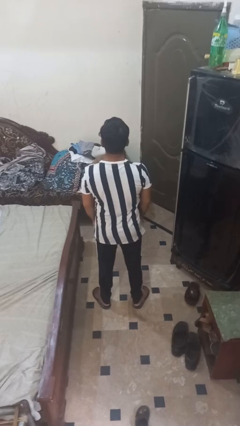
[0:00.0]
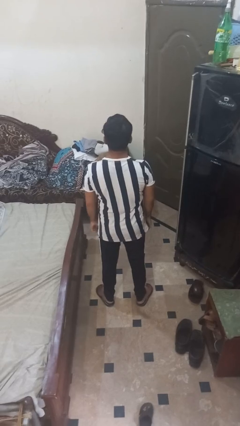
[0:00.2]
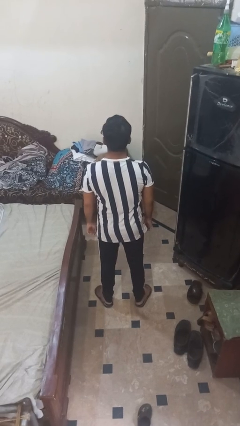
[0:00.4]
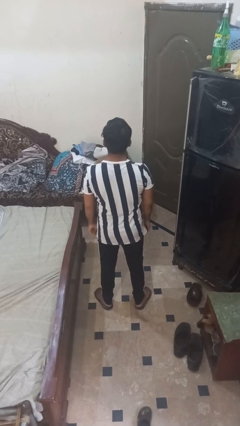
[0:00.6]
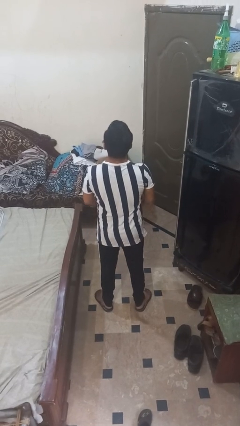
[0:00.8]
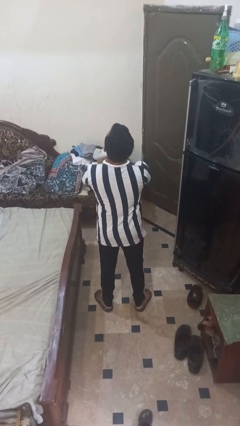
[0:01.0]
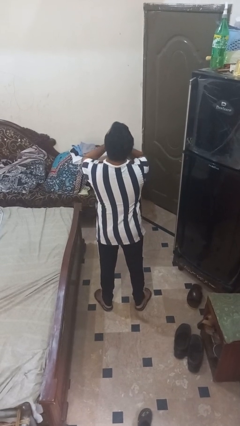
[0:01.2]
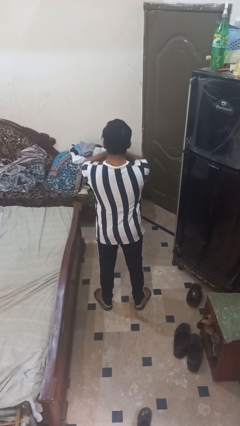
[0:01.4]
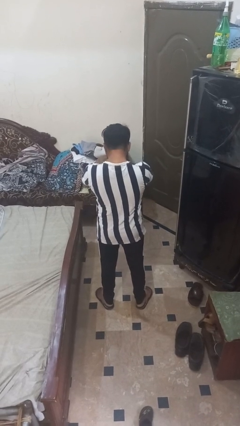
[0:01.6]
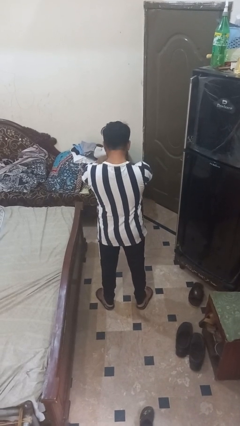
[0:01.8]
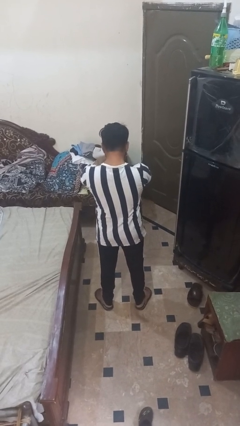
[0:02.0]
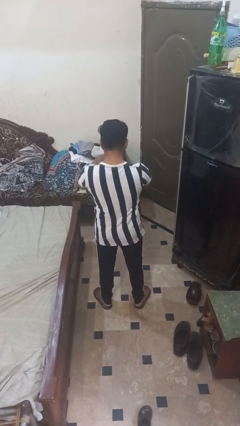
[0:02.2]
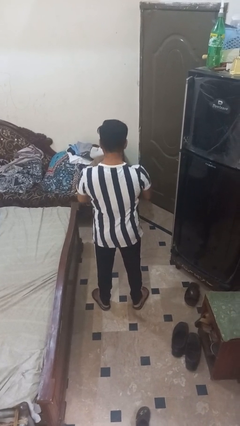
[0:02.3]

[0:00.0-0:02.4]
person sneezes into hand

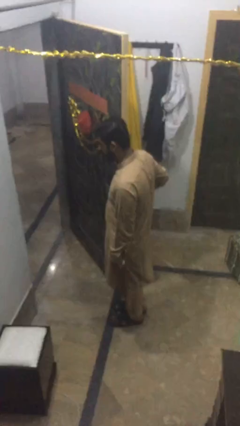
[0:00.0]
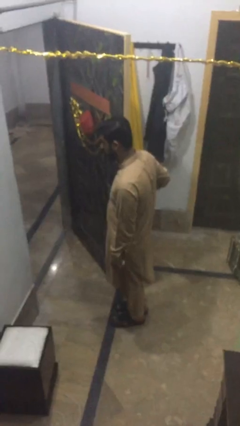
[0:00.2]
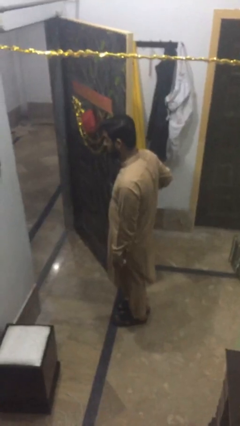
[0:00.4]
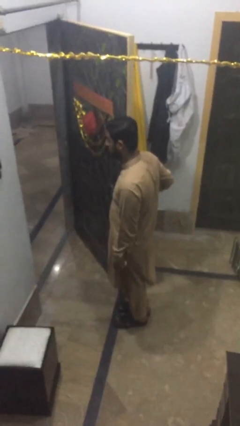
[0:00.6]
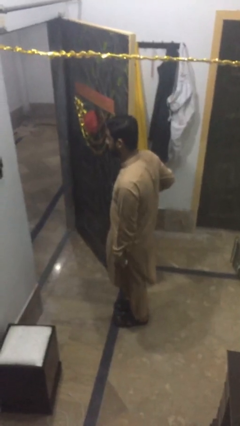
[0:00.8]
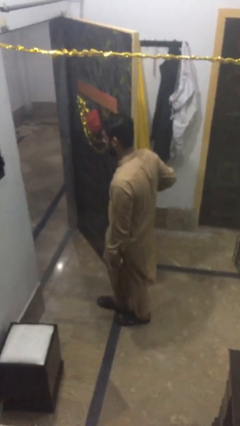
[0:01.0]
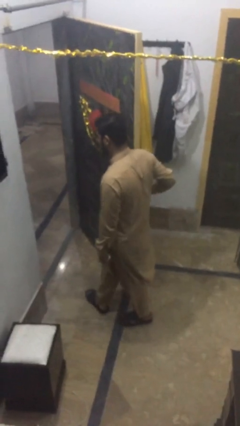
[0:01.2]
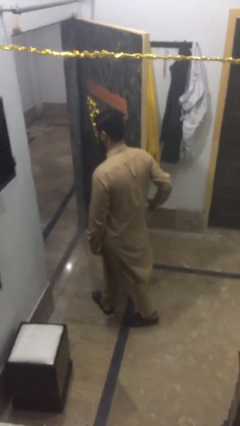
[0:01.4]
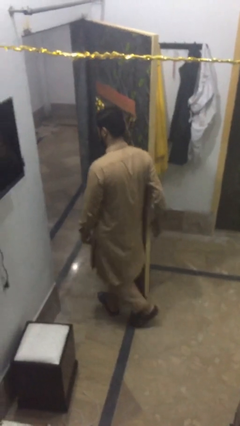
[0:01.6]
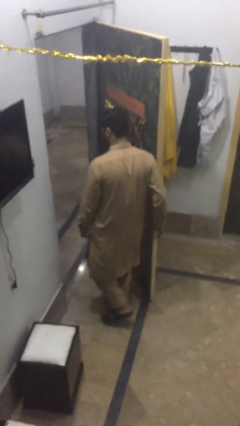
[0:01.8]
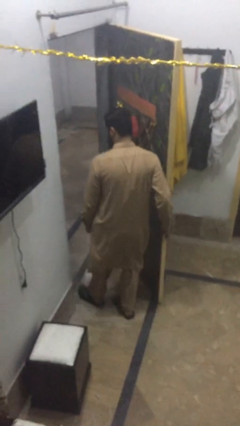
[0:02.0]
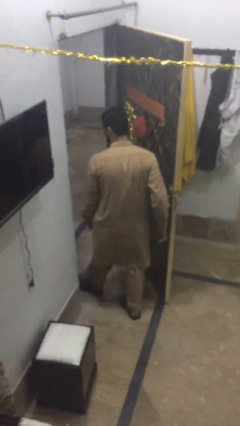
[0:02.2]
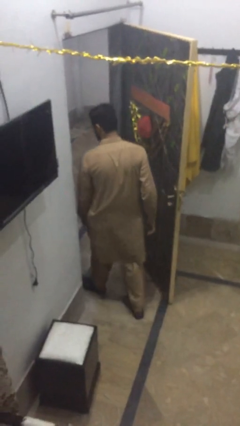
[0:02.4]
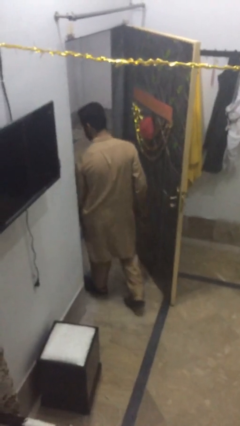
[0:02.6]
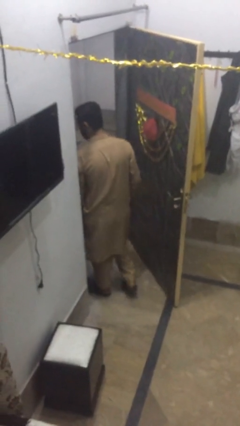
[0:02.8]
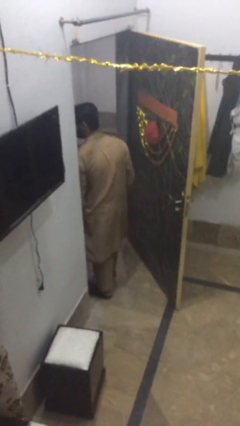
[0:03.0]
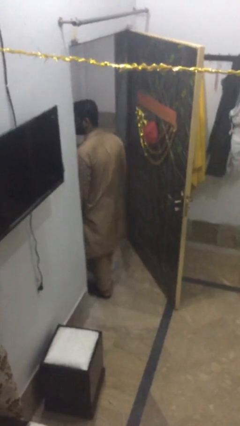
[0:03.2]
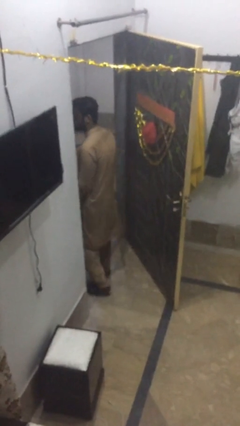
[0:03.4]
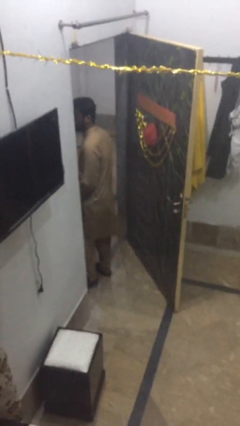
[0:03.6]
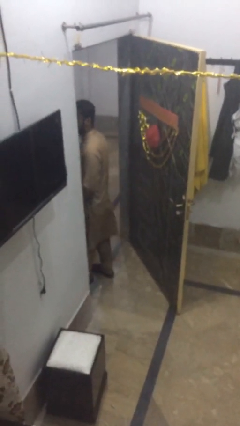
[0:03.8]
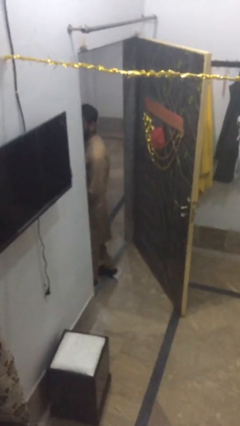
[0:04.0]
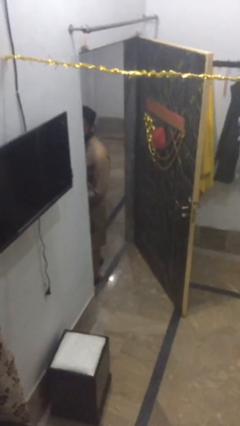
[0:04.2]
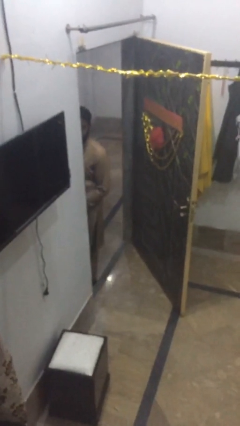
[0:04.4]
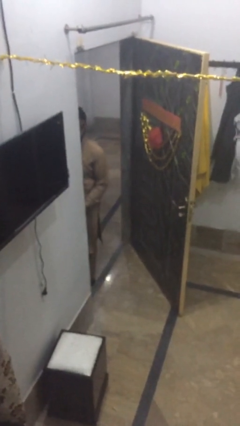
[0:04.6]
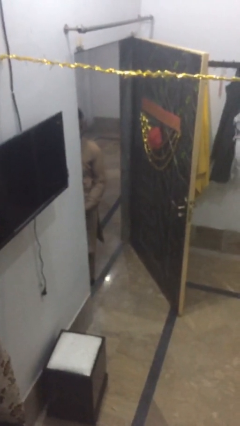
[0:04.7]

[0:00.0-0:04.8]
person exits scene through structure

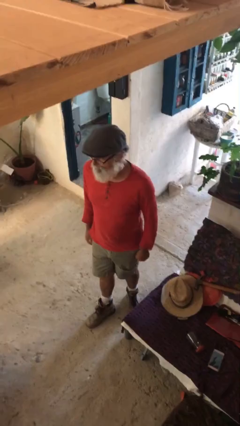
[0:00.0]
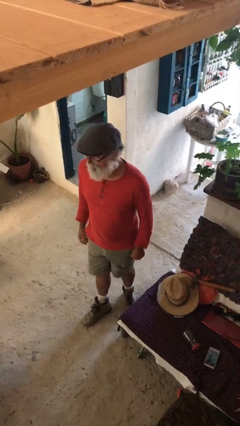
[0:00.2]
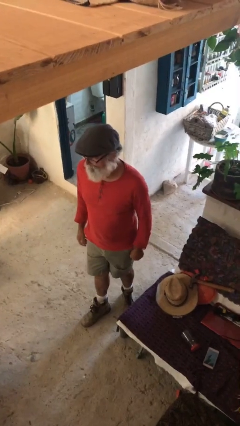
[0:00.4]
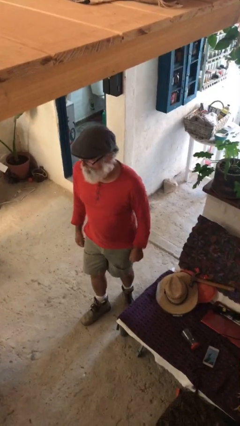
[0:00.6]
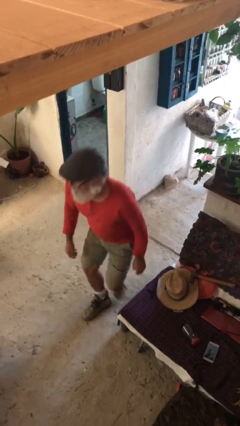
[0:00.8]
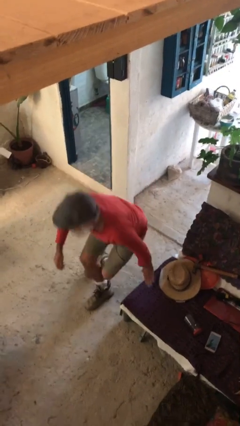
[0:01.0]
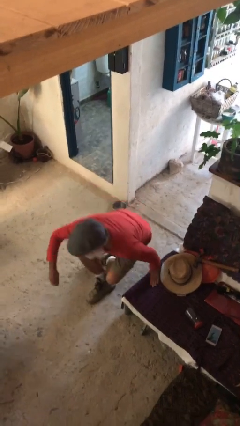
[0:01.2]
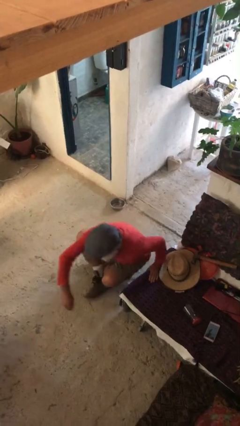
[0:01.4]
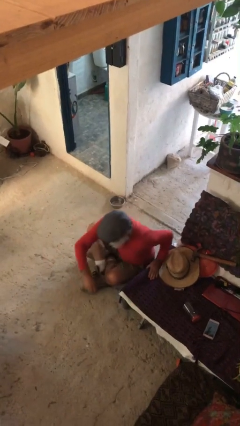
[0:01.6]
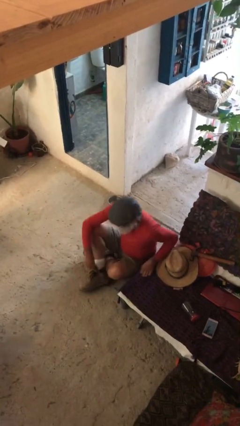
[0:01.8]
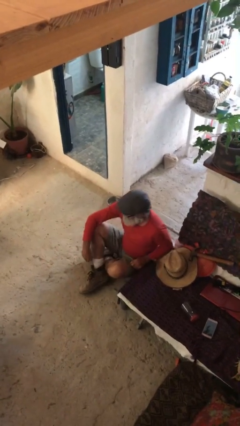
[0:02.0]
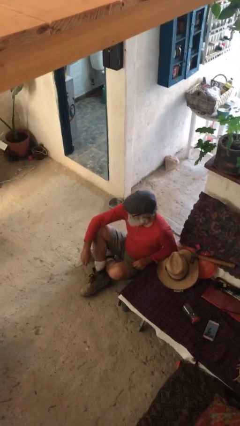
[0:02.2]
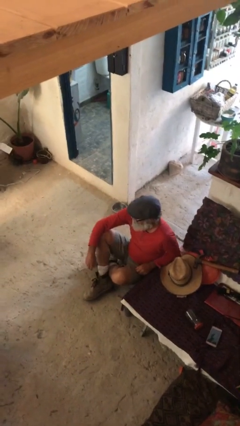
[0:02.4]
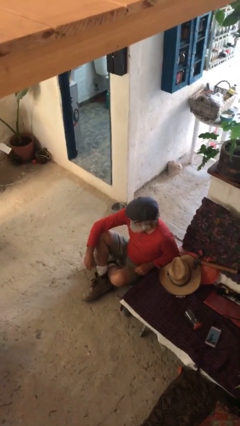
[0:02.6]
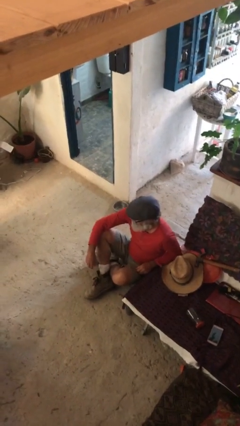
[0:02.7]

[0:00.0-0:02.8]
person sits down

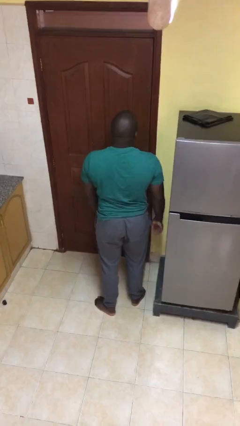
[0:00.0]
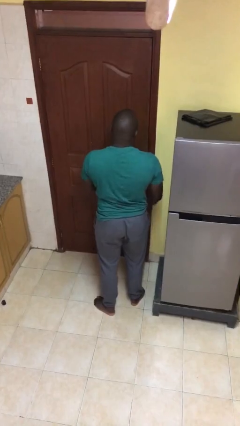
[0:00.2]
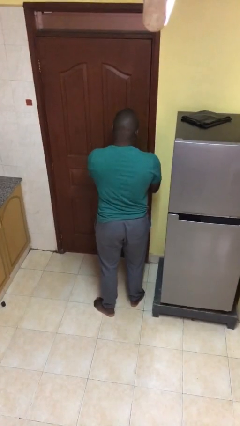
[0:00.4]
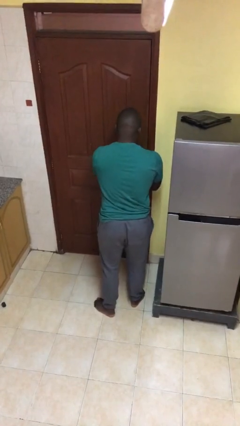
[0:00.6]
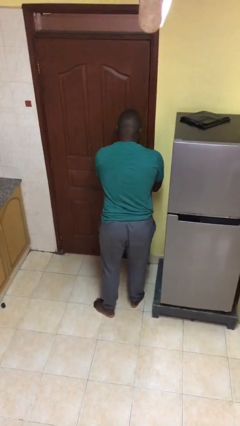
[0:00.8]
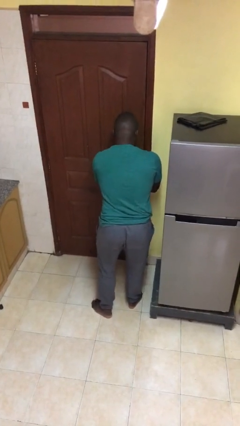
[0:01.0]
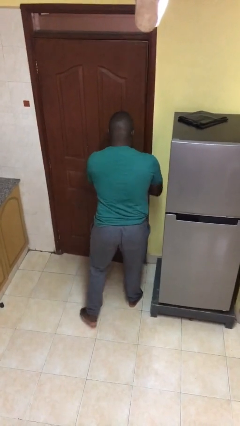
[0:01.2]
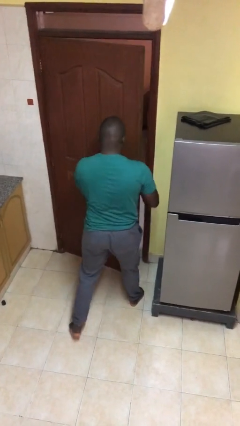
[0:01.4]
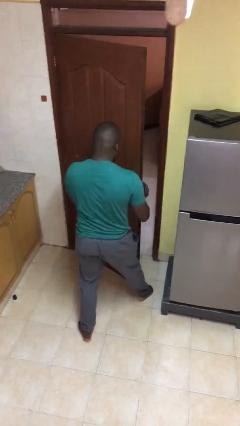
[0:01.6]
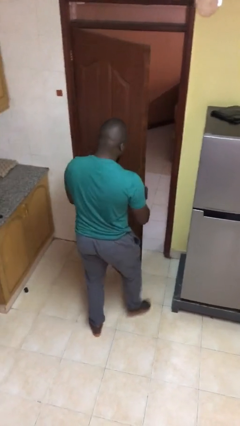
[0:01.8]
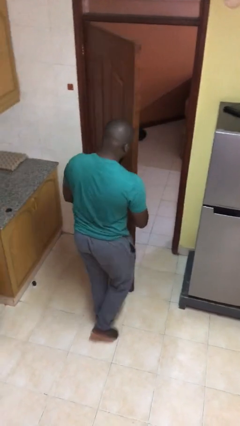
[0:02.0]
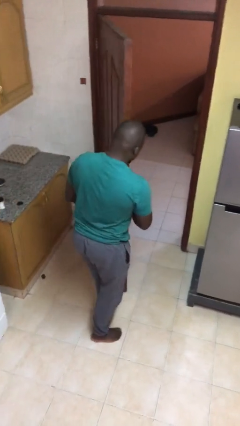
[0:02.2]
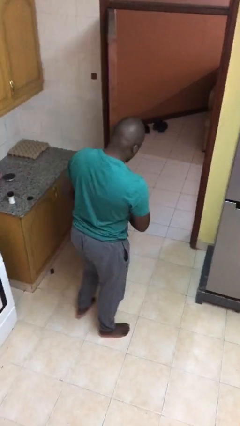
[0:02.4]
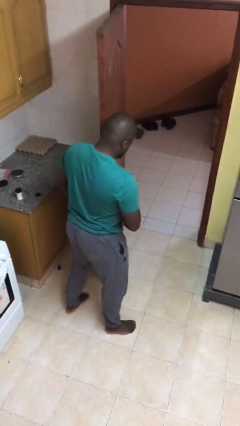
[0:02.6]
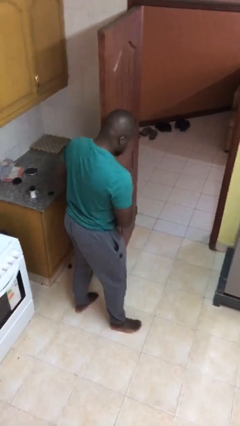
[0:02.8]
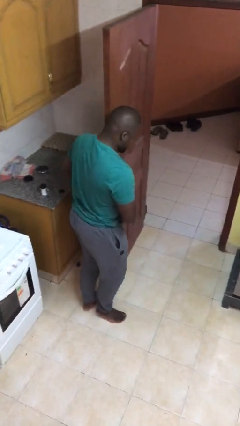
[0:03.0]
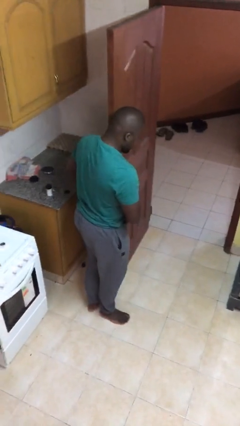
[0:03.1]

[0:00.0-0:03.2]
person opens facility door

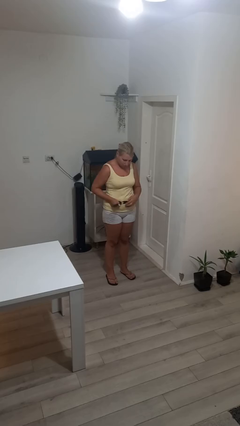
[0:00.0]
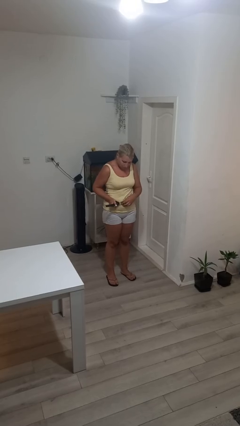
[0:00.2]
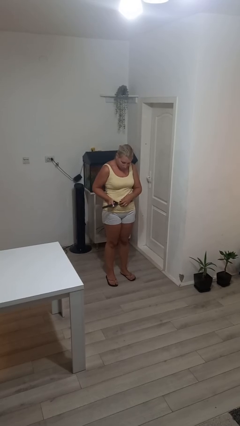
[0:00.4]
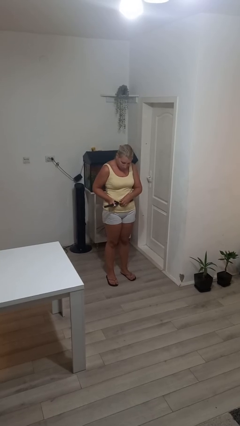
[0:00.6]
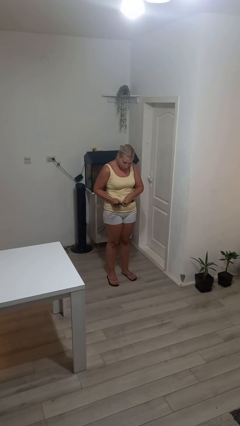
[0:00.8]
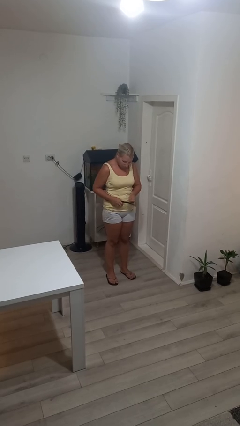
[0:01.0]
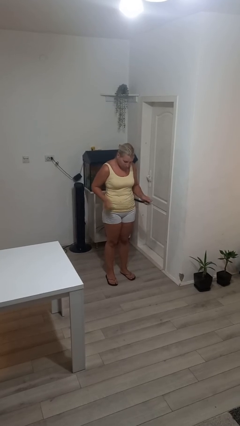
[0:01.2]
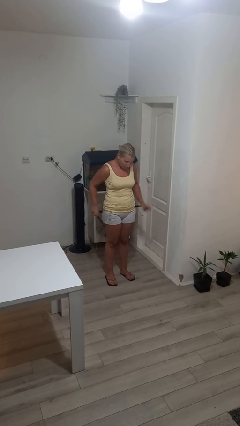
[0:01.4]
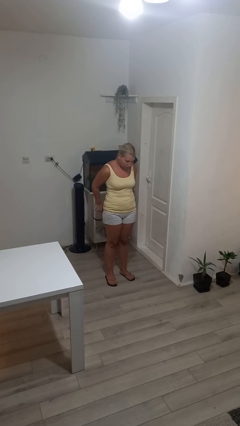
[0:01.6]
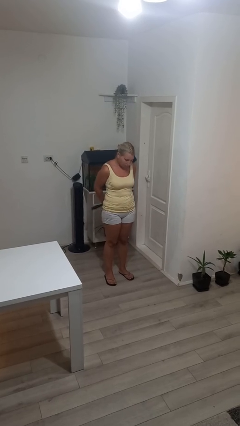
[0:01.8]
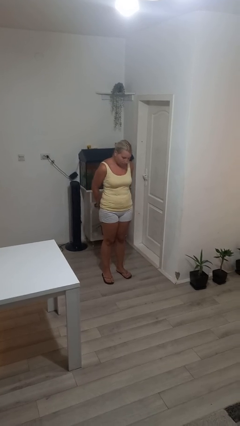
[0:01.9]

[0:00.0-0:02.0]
person takes off belt

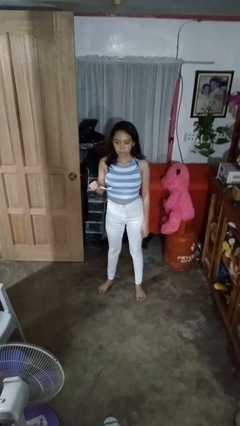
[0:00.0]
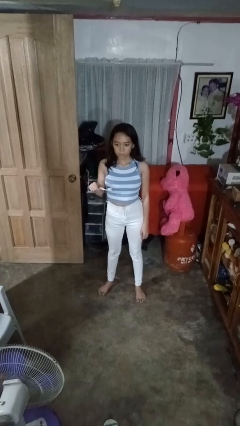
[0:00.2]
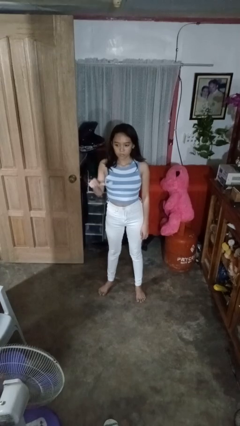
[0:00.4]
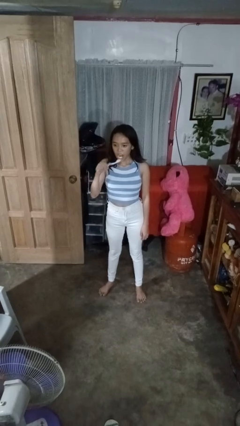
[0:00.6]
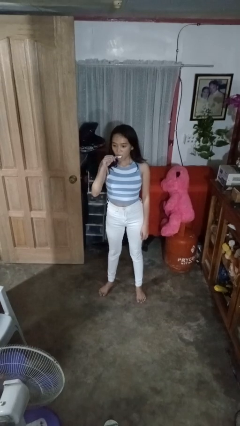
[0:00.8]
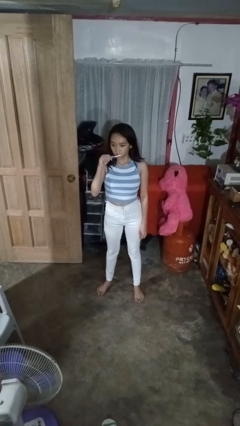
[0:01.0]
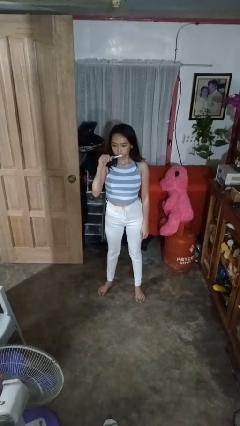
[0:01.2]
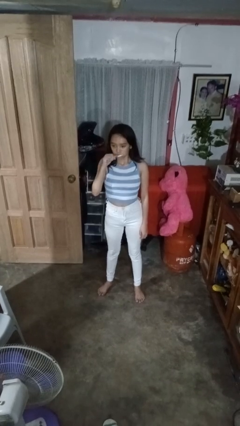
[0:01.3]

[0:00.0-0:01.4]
person brushes teeth

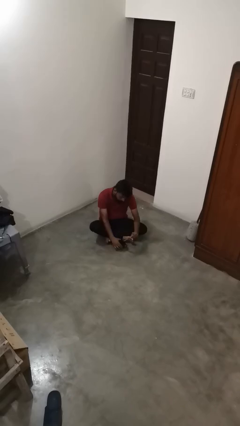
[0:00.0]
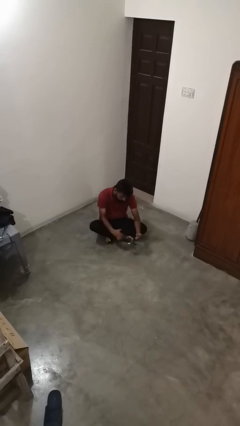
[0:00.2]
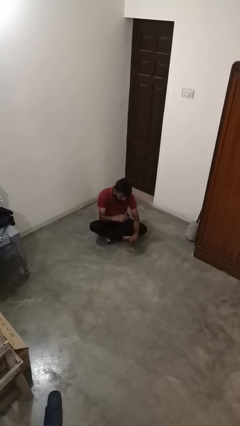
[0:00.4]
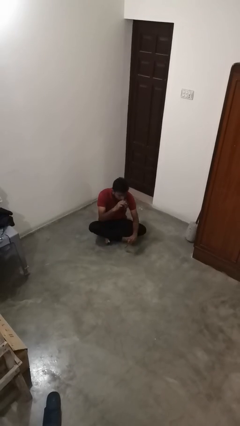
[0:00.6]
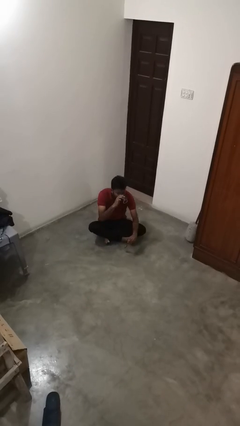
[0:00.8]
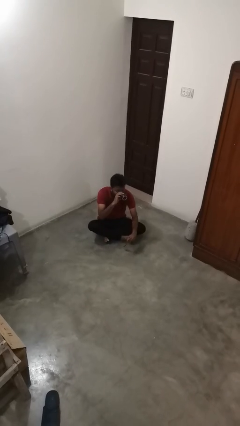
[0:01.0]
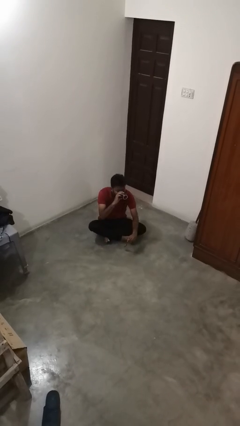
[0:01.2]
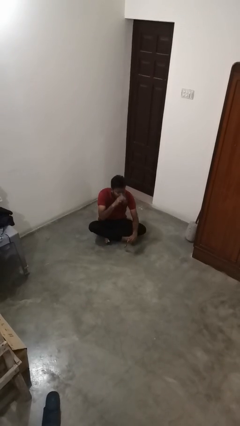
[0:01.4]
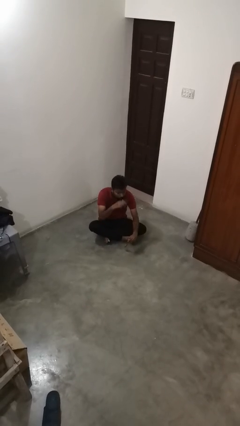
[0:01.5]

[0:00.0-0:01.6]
person drinks from mug
